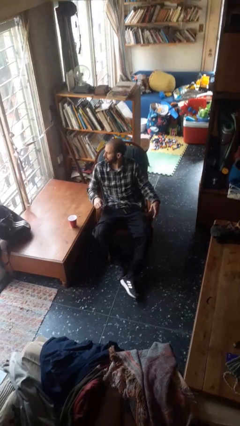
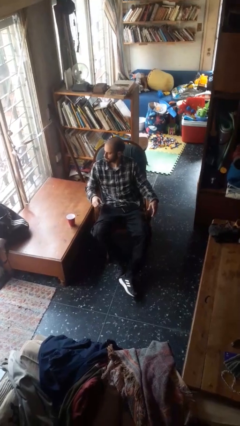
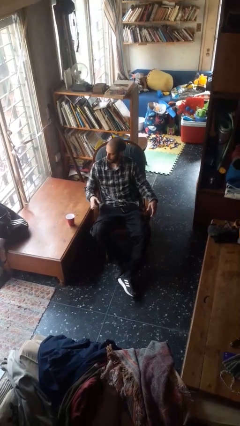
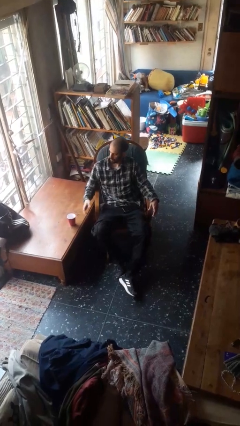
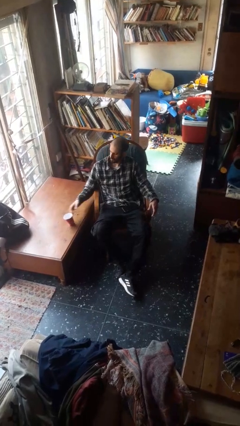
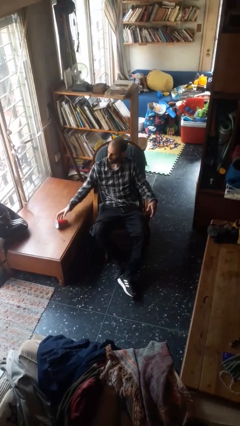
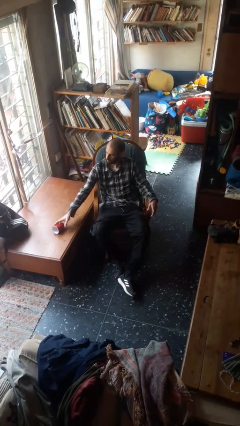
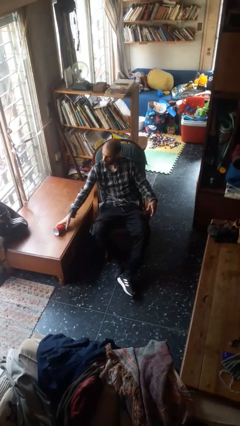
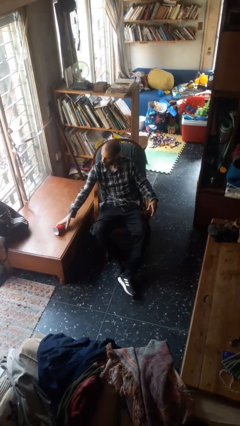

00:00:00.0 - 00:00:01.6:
person knocks over glass

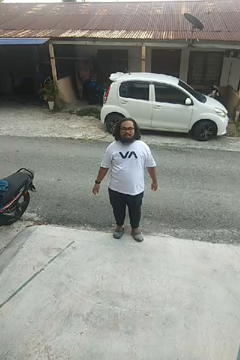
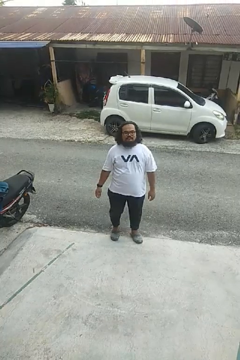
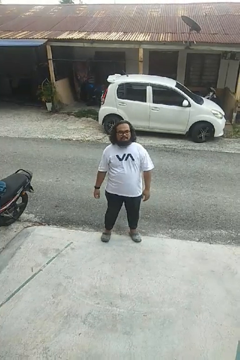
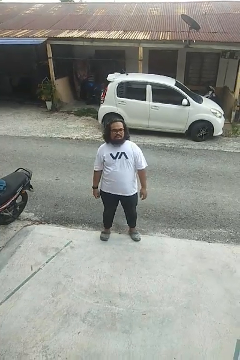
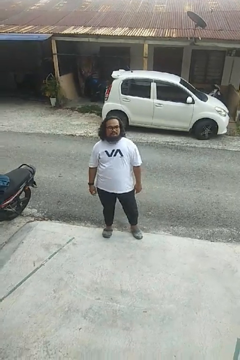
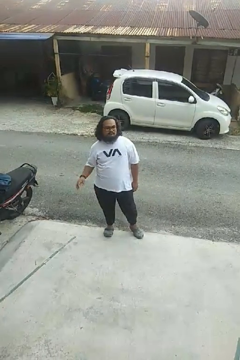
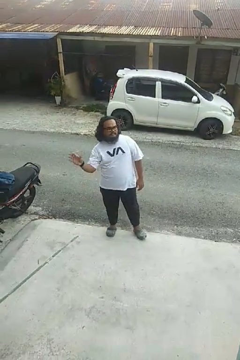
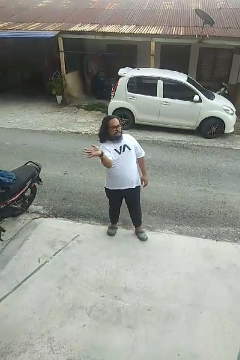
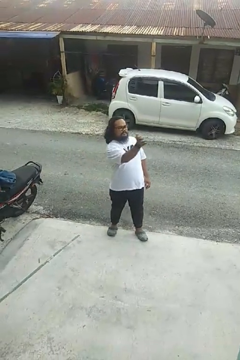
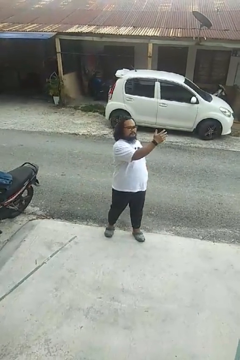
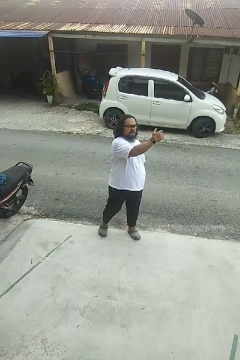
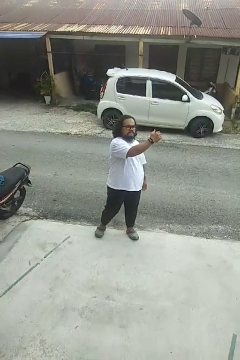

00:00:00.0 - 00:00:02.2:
person gestures swipe left

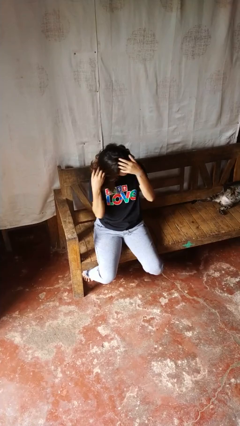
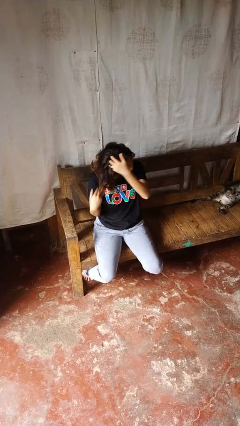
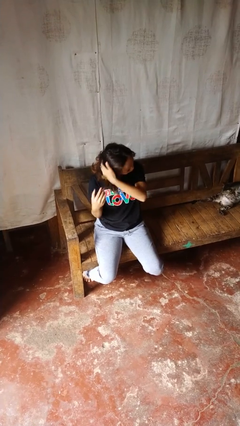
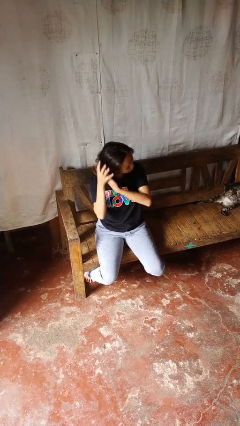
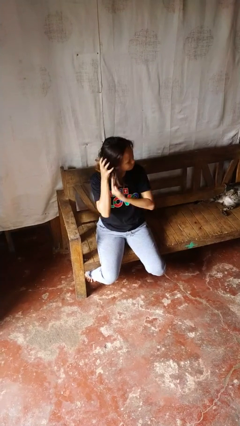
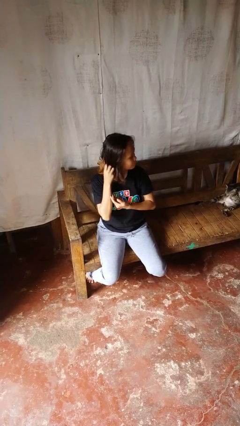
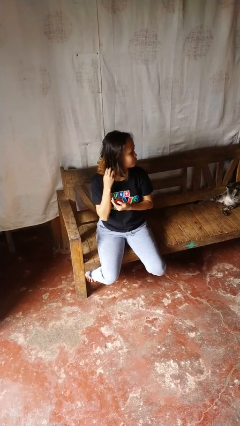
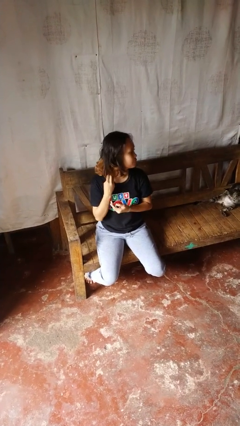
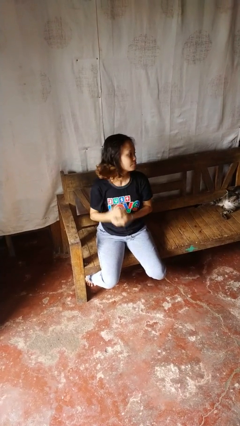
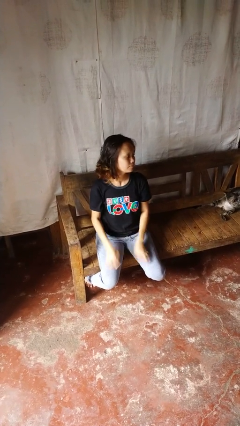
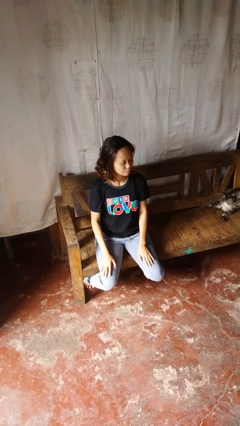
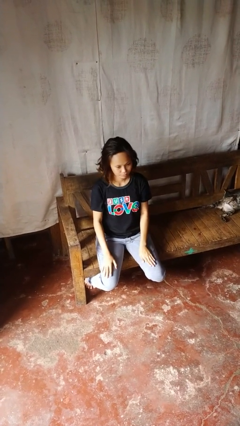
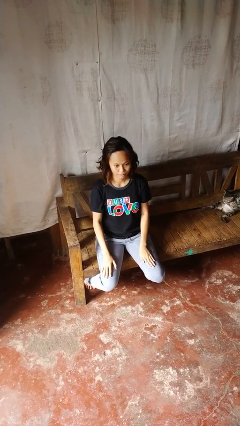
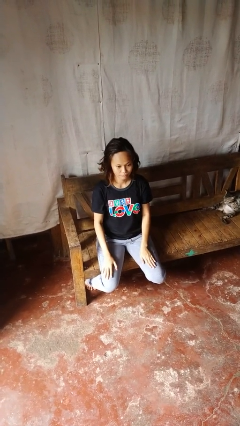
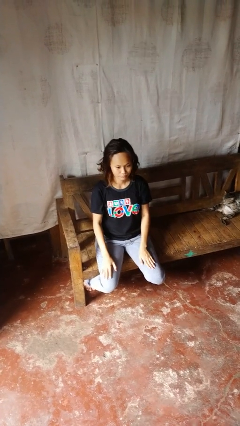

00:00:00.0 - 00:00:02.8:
person strokes hair

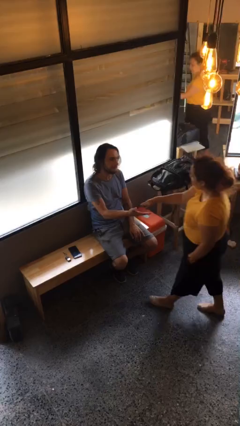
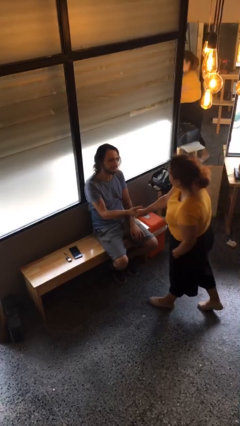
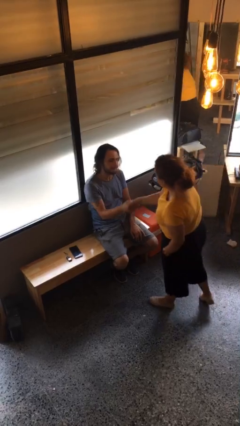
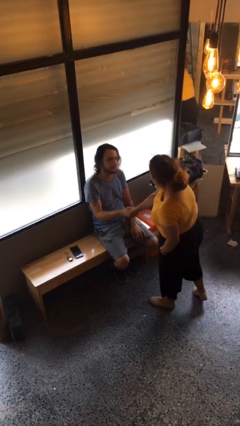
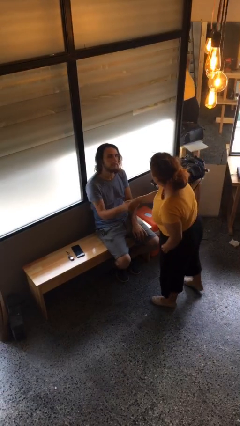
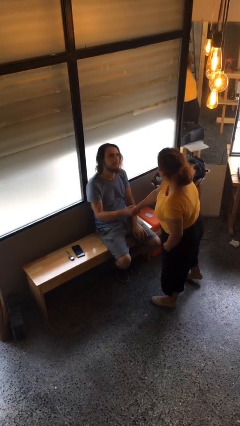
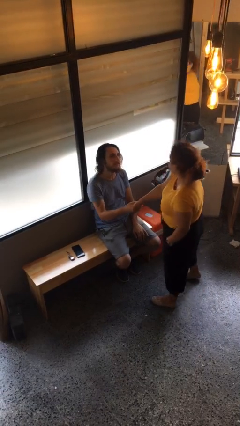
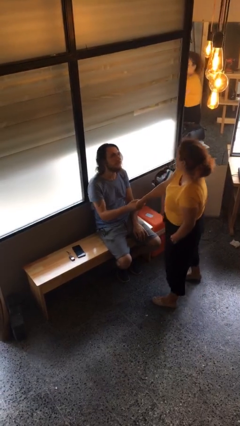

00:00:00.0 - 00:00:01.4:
person shakes hand

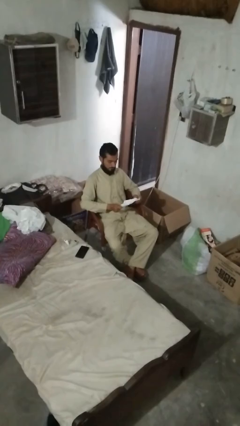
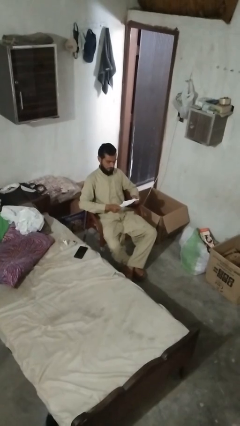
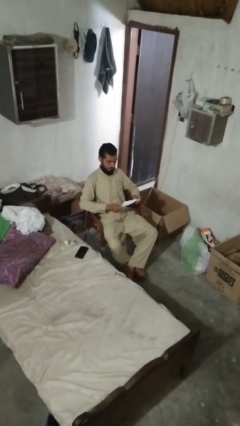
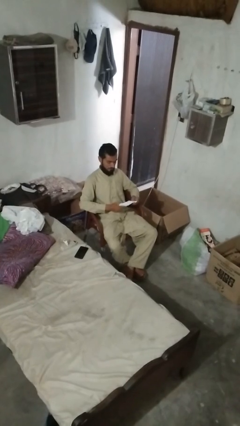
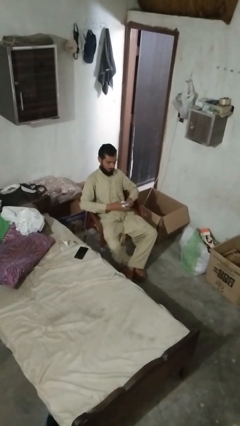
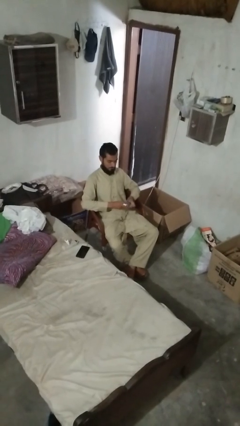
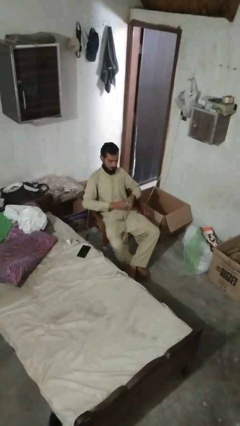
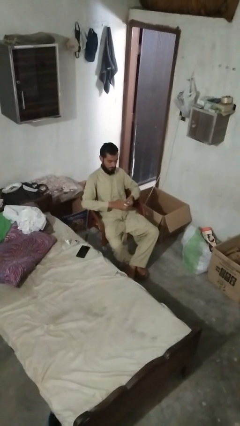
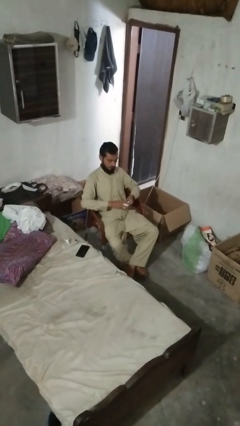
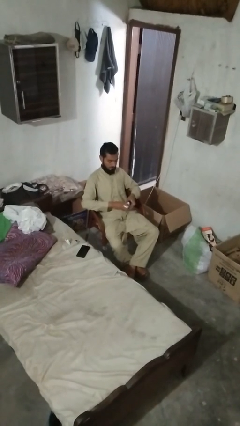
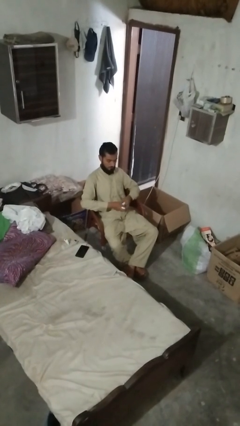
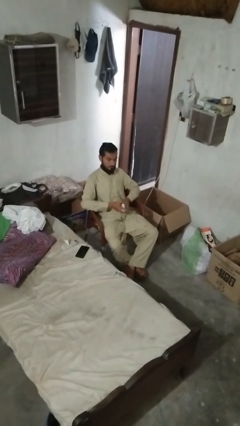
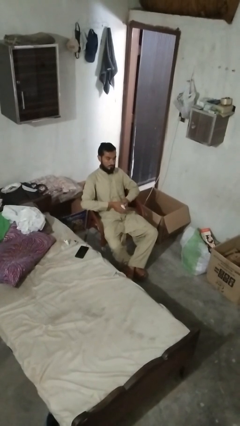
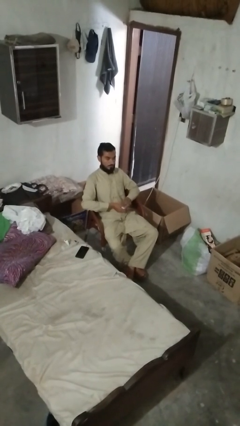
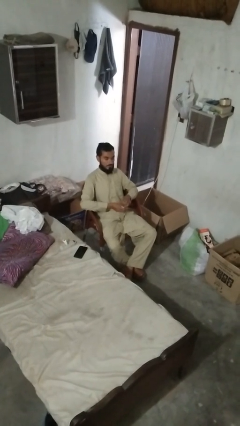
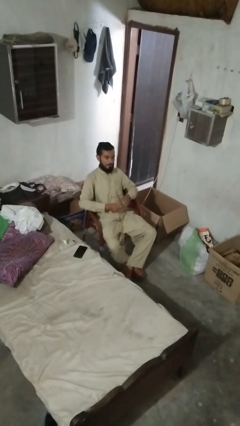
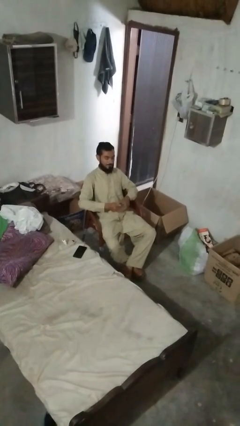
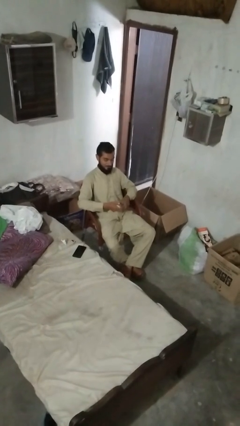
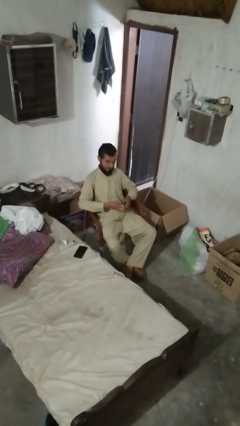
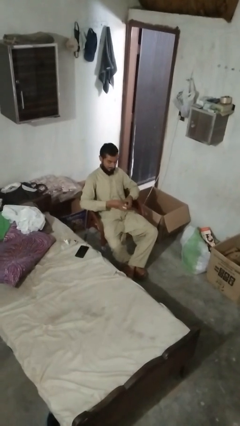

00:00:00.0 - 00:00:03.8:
person crumples paper

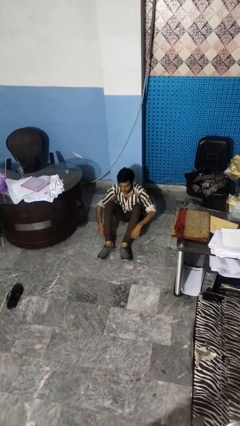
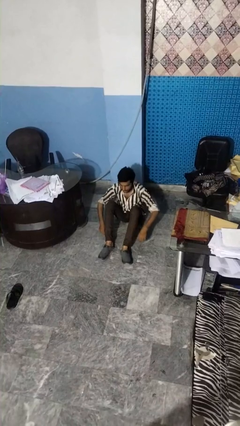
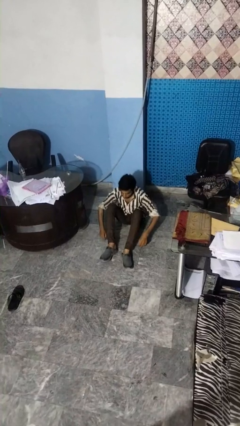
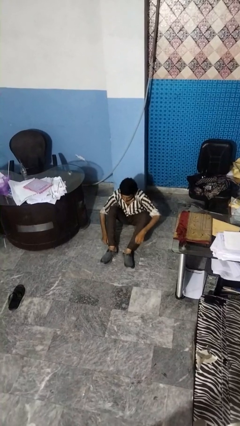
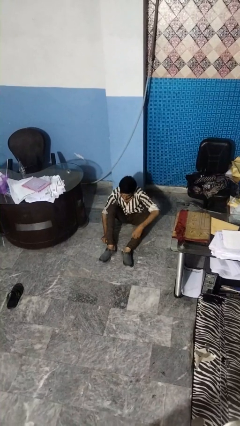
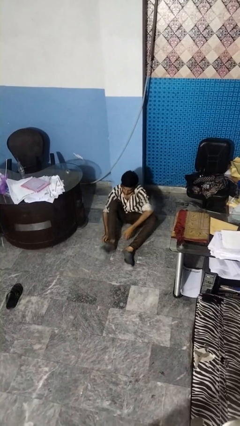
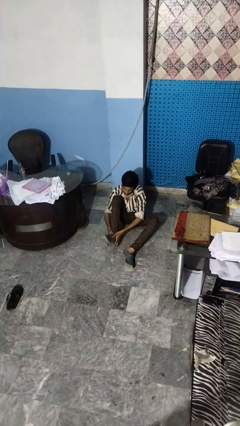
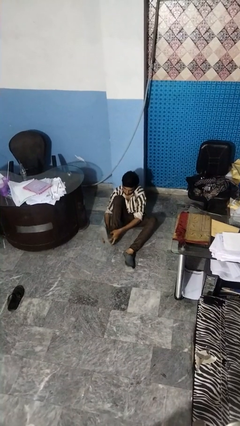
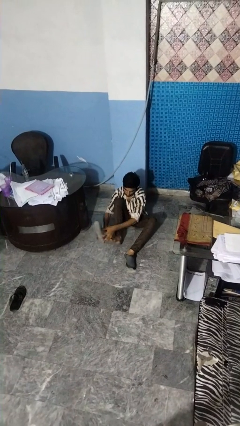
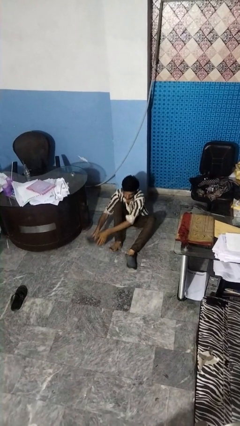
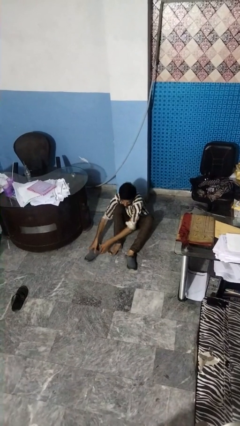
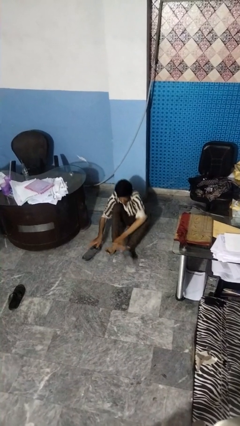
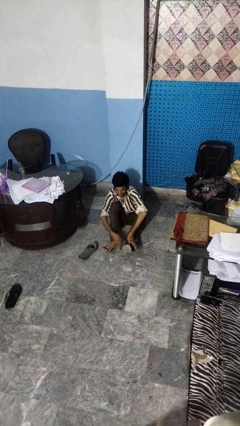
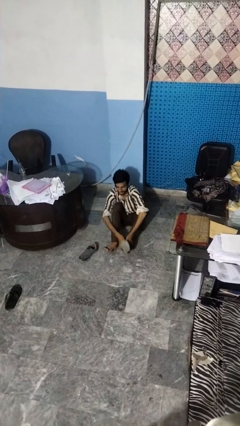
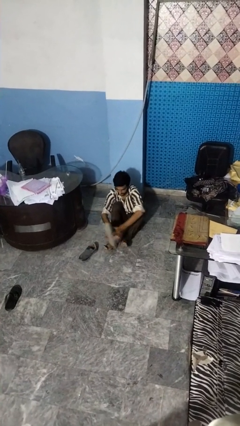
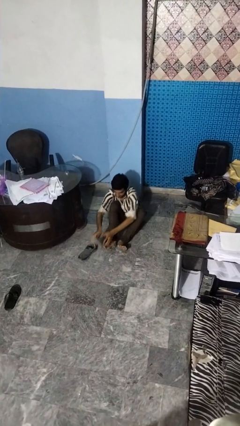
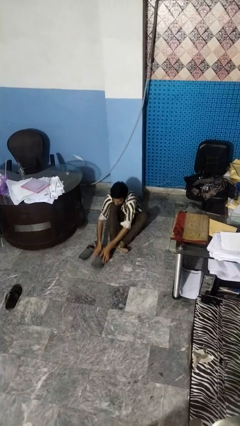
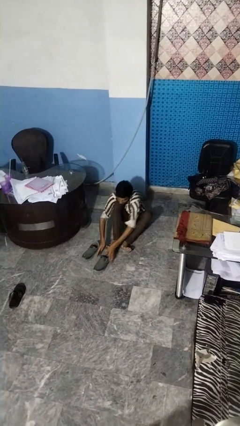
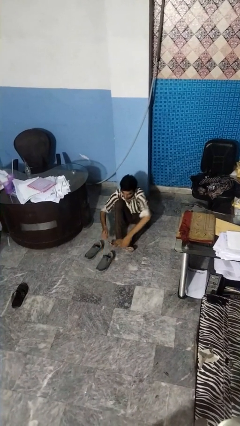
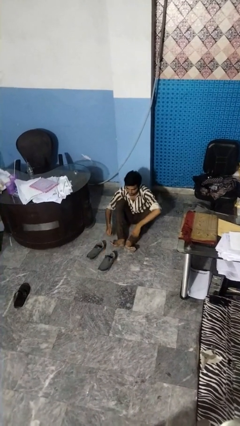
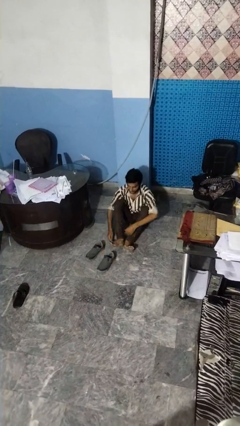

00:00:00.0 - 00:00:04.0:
person takes off shoes

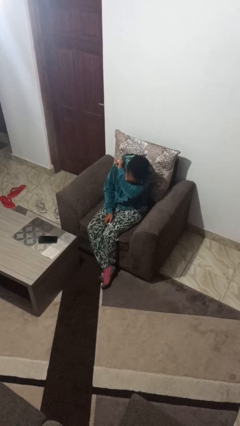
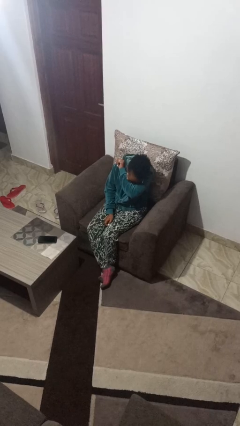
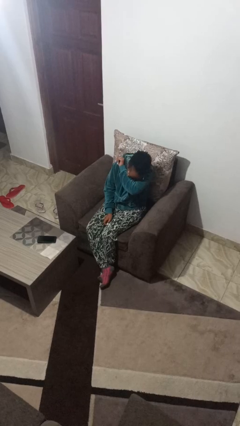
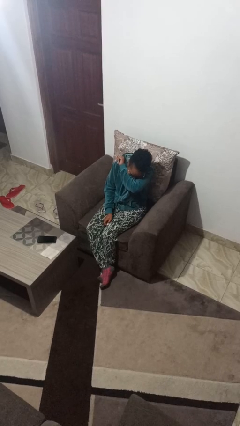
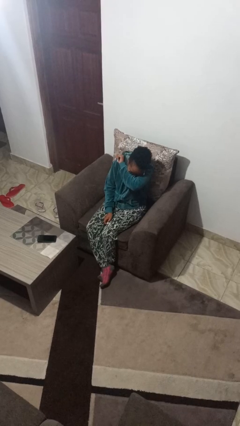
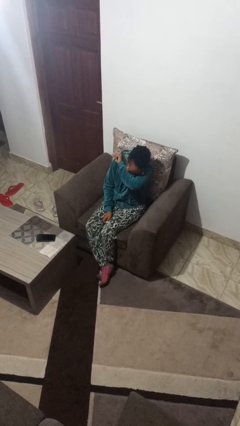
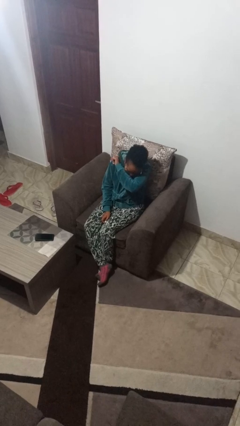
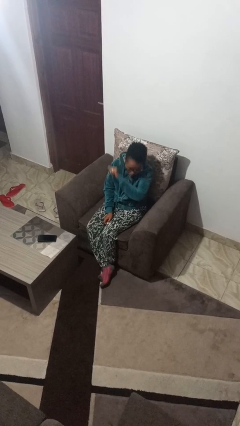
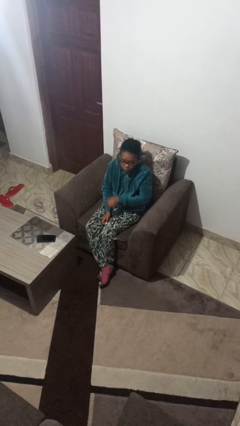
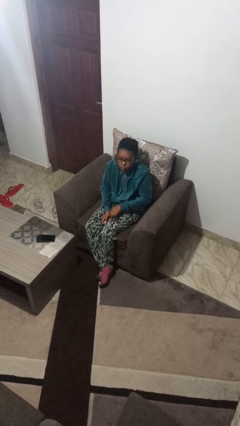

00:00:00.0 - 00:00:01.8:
person sneezes into arm
